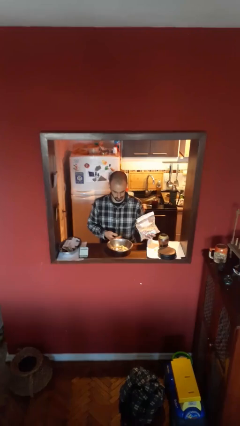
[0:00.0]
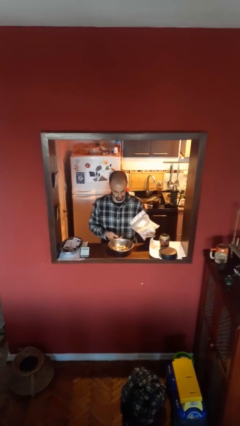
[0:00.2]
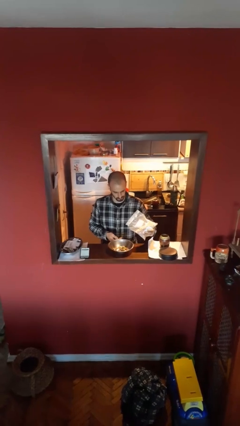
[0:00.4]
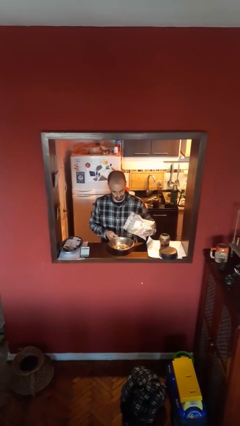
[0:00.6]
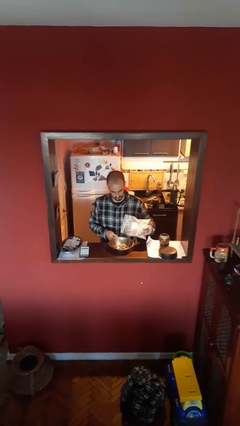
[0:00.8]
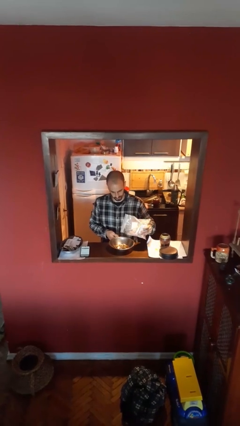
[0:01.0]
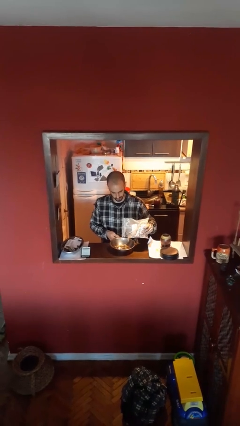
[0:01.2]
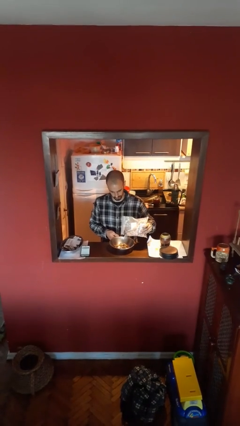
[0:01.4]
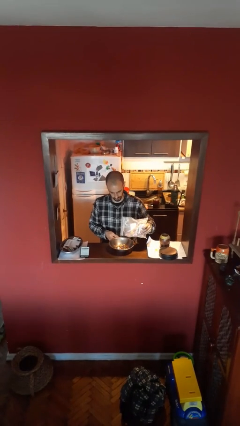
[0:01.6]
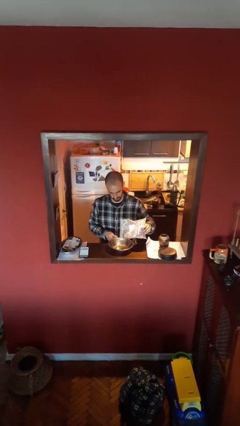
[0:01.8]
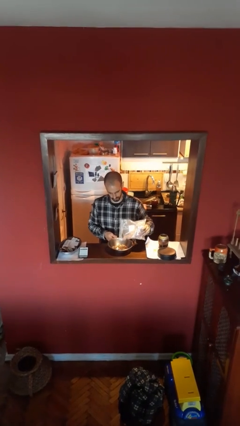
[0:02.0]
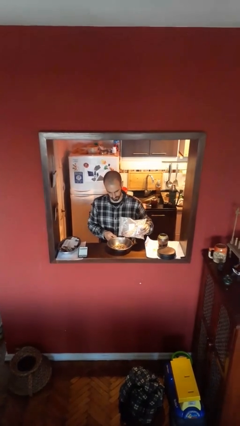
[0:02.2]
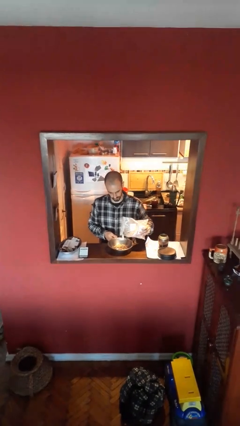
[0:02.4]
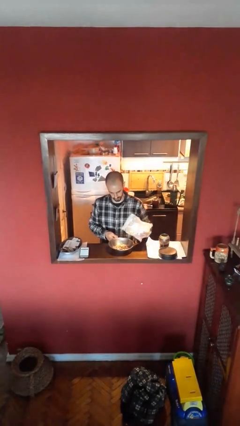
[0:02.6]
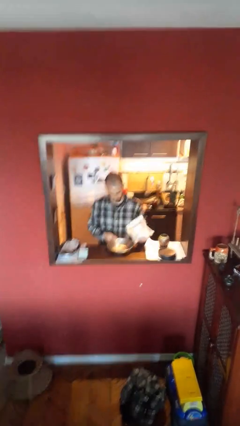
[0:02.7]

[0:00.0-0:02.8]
person pours into bowl

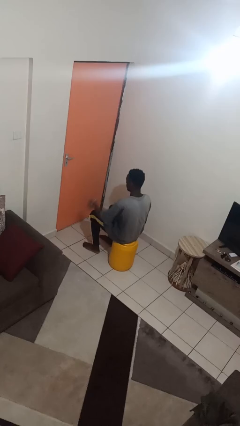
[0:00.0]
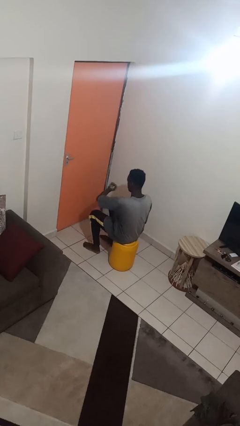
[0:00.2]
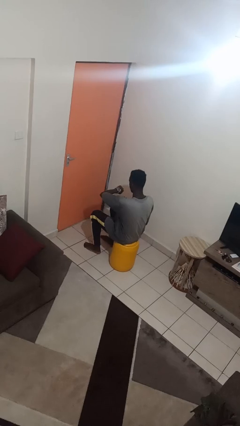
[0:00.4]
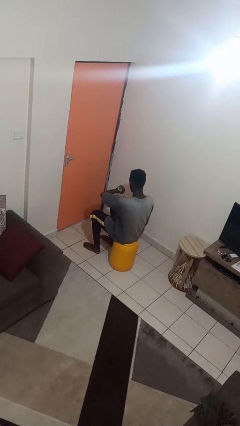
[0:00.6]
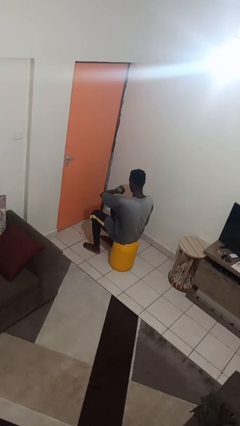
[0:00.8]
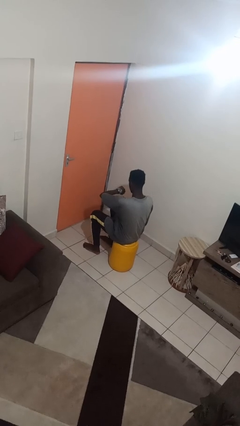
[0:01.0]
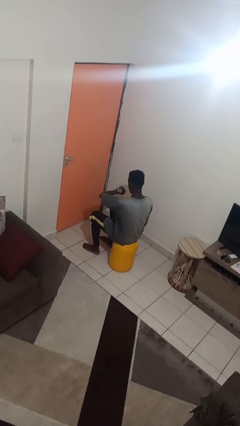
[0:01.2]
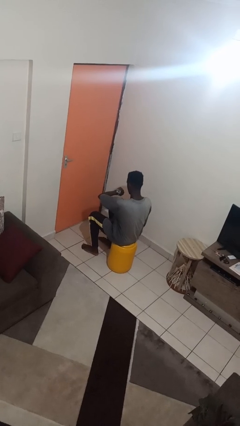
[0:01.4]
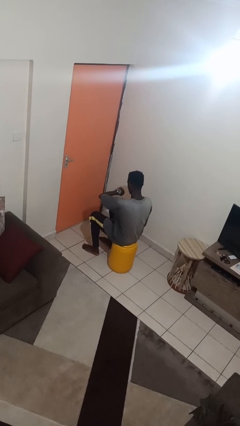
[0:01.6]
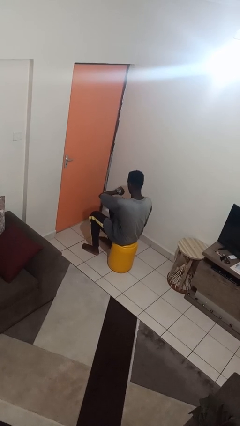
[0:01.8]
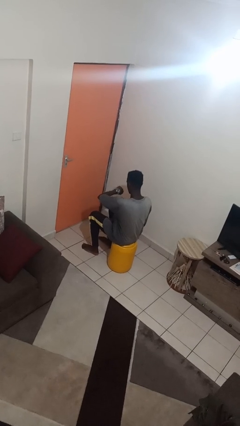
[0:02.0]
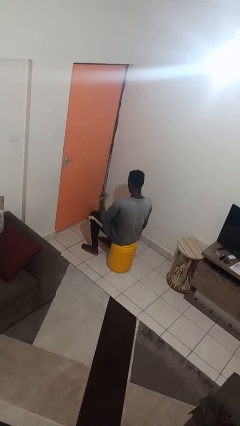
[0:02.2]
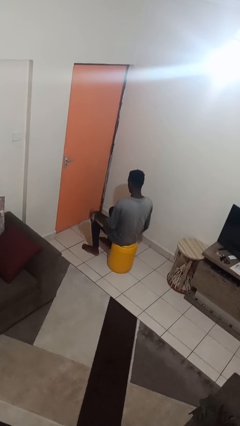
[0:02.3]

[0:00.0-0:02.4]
person looks at wristwatch

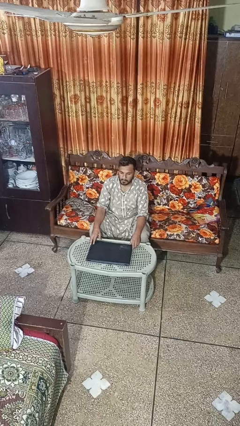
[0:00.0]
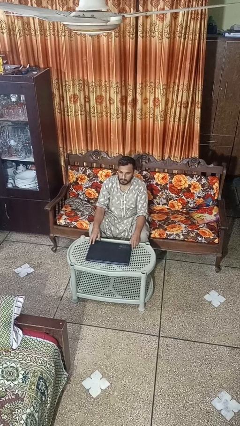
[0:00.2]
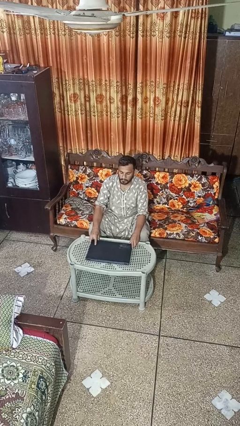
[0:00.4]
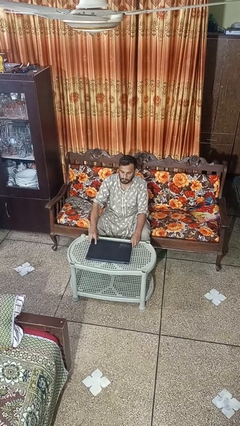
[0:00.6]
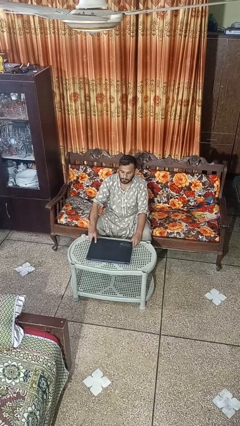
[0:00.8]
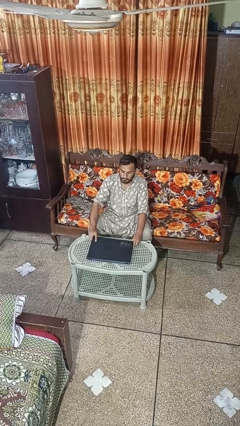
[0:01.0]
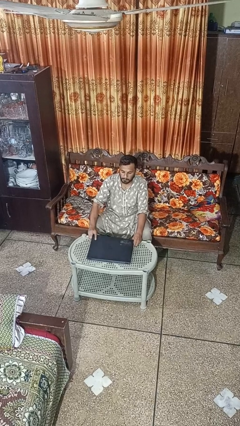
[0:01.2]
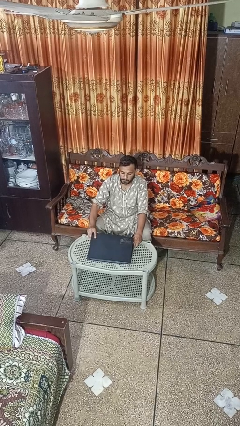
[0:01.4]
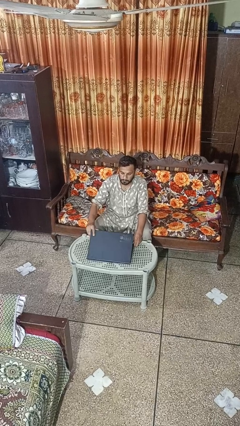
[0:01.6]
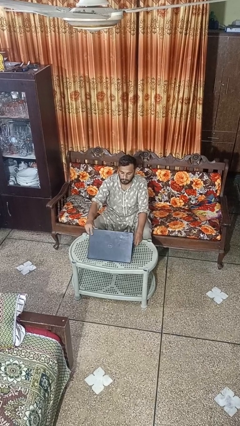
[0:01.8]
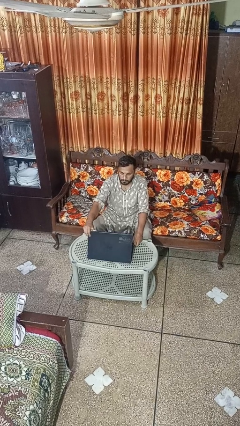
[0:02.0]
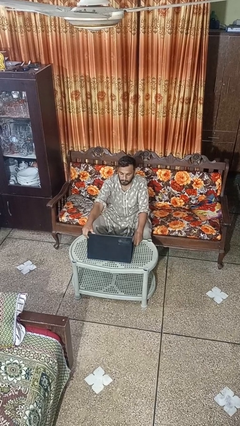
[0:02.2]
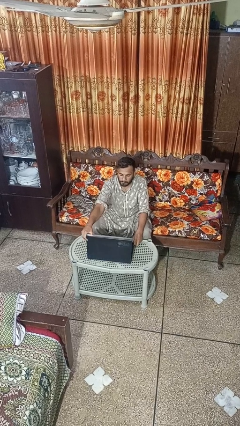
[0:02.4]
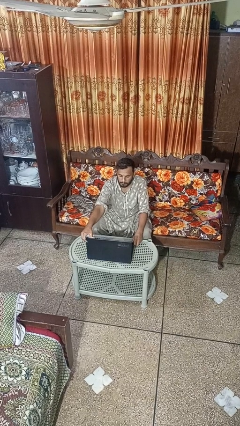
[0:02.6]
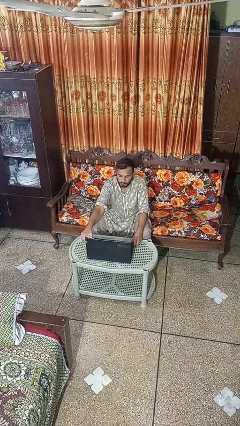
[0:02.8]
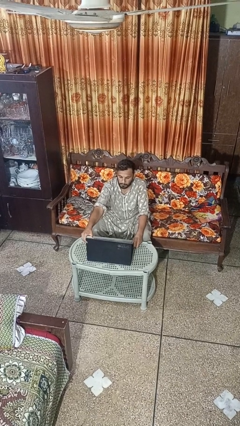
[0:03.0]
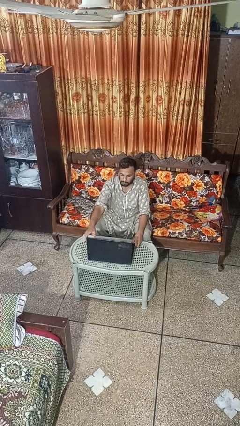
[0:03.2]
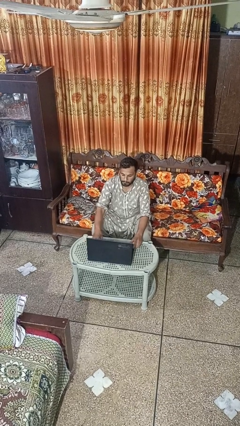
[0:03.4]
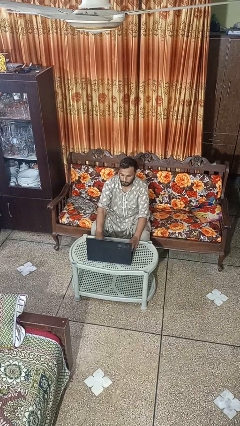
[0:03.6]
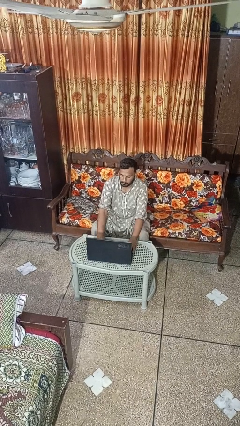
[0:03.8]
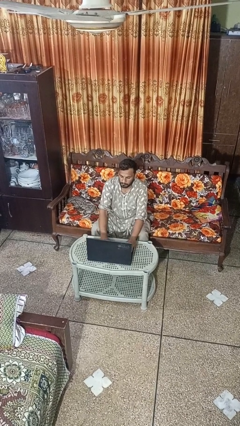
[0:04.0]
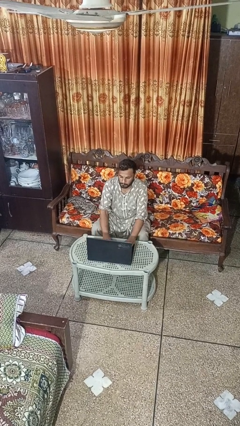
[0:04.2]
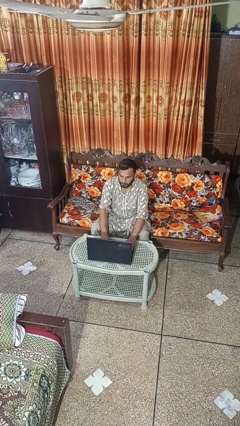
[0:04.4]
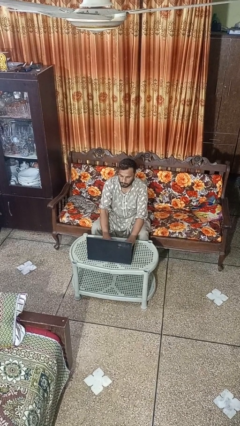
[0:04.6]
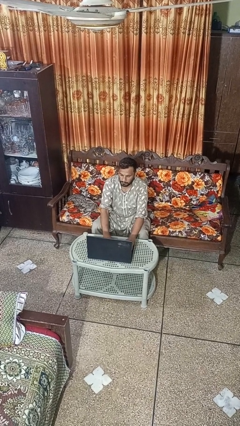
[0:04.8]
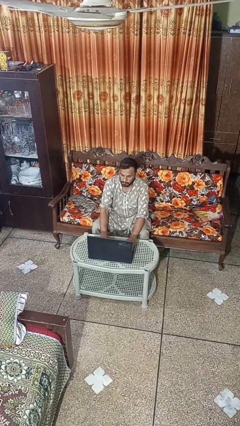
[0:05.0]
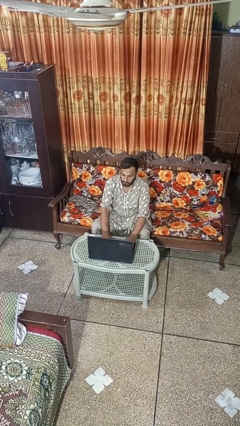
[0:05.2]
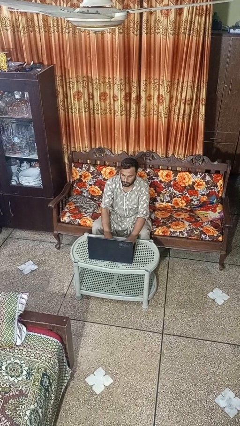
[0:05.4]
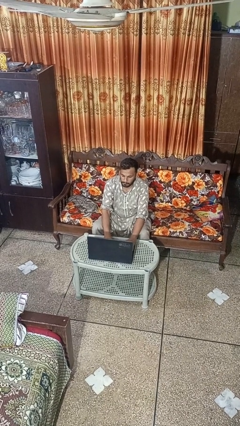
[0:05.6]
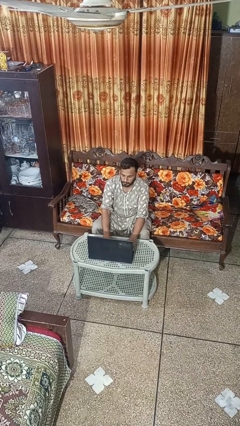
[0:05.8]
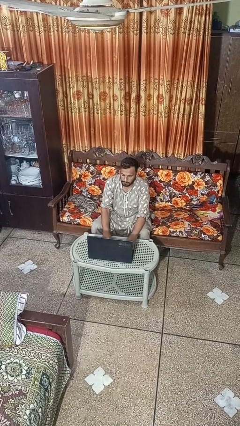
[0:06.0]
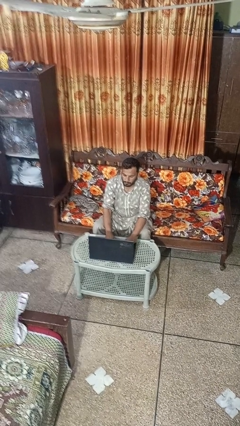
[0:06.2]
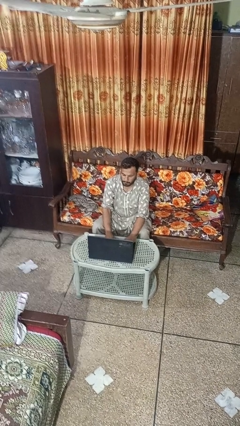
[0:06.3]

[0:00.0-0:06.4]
person opens laptop

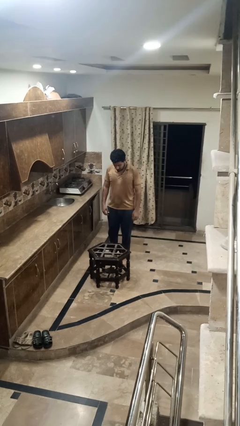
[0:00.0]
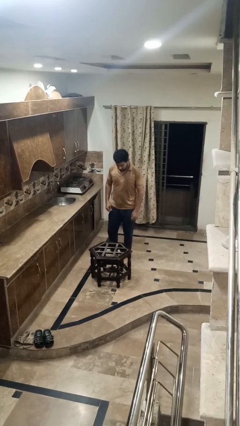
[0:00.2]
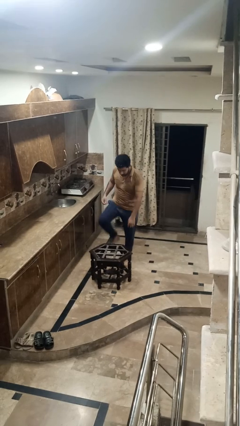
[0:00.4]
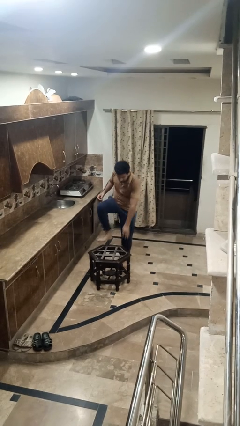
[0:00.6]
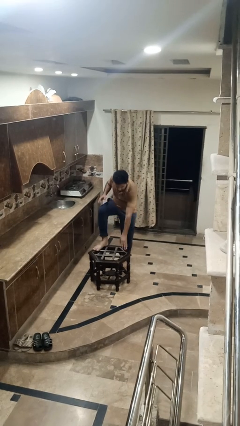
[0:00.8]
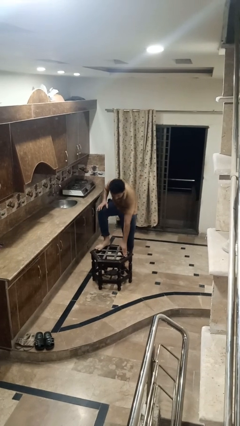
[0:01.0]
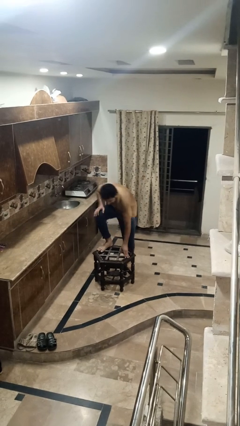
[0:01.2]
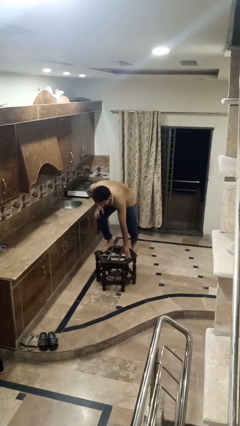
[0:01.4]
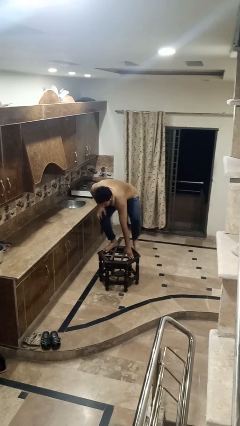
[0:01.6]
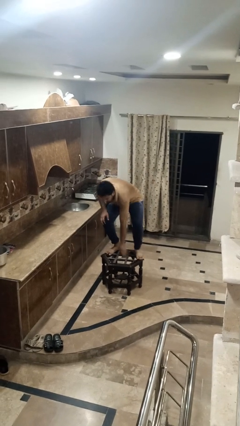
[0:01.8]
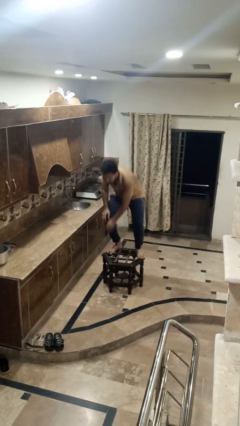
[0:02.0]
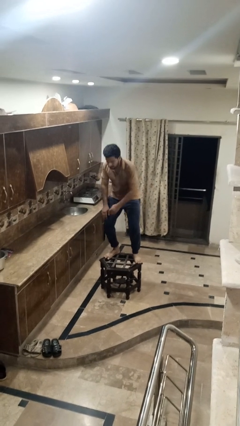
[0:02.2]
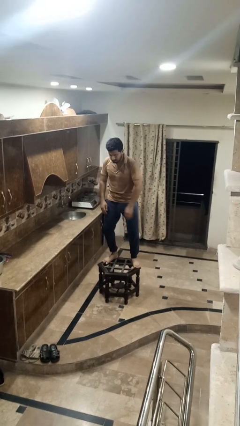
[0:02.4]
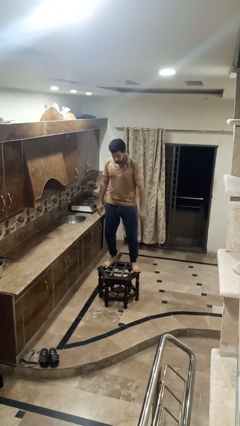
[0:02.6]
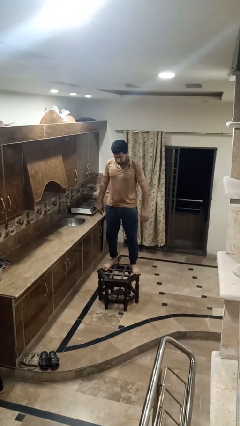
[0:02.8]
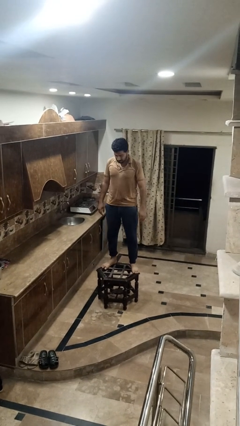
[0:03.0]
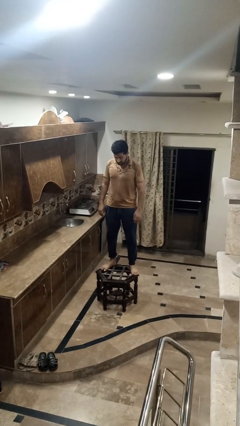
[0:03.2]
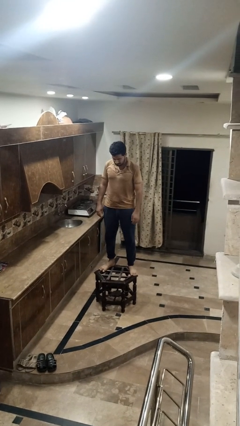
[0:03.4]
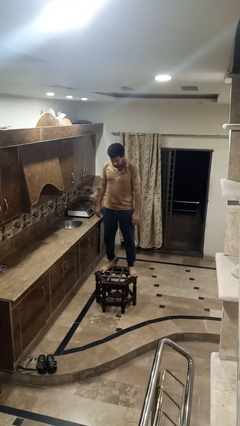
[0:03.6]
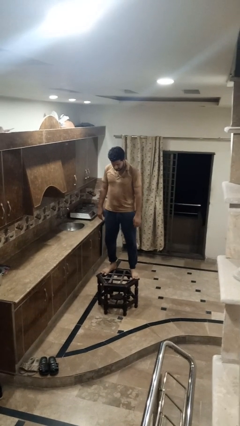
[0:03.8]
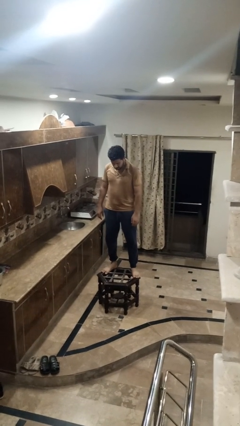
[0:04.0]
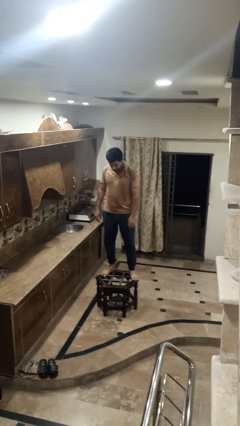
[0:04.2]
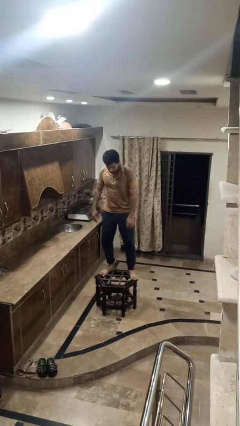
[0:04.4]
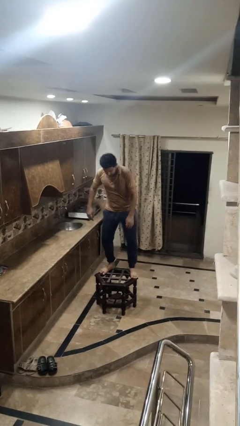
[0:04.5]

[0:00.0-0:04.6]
person climbs on table

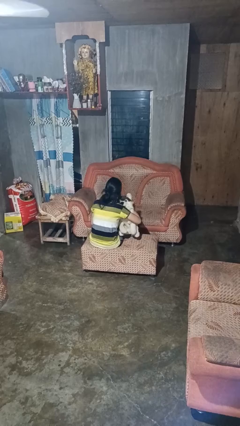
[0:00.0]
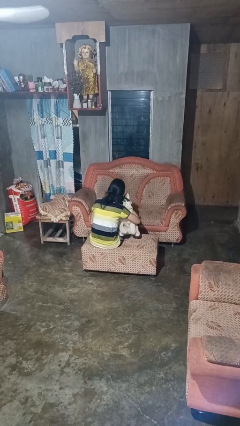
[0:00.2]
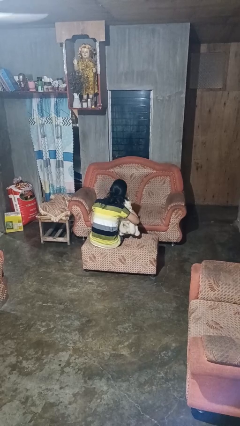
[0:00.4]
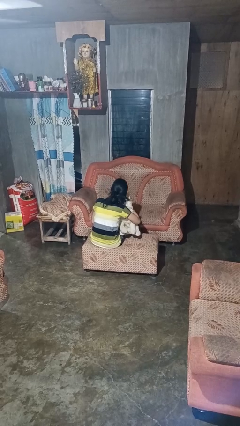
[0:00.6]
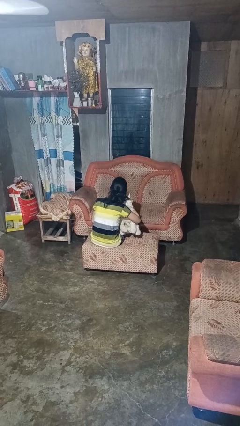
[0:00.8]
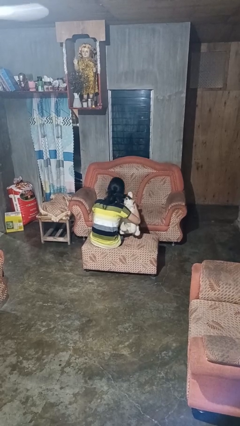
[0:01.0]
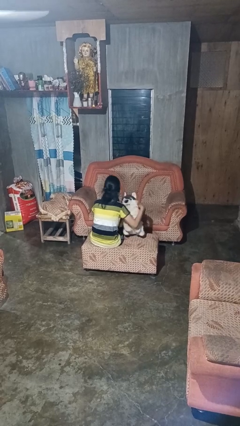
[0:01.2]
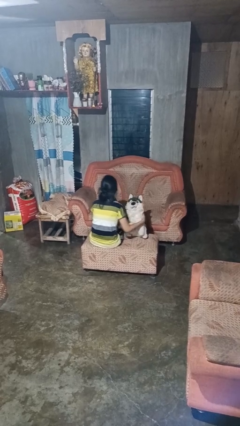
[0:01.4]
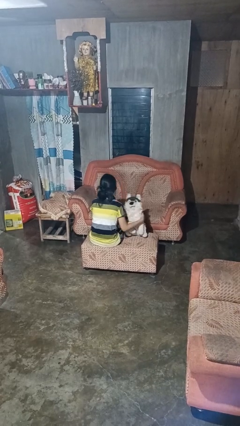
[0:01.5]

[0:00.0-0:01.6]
person hugs stuffed animal
